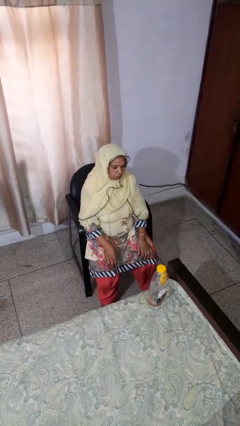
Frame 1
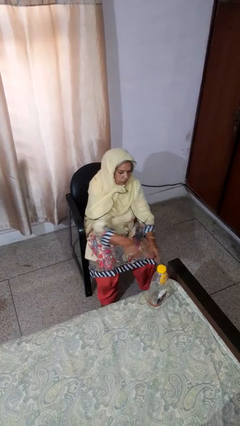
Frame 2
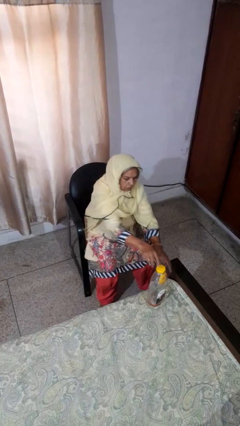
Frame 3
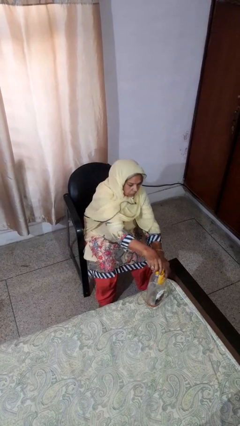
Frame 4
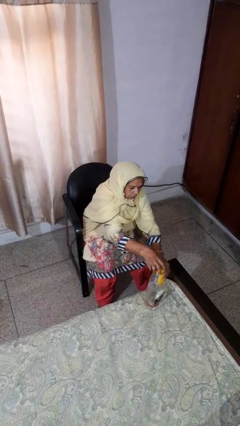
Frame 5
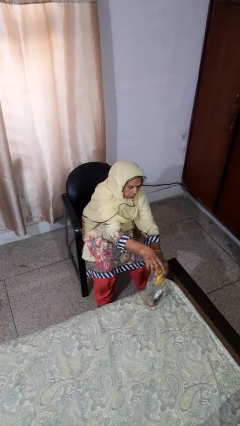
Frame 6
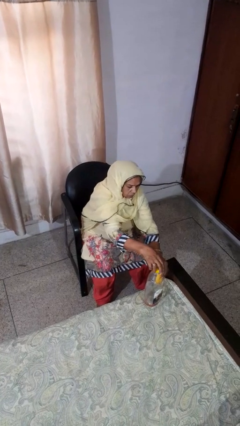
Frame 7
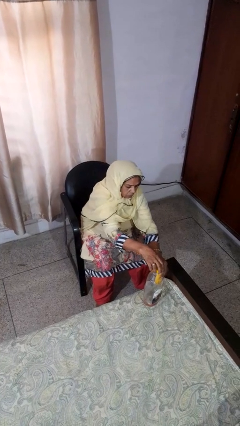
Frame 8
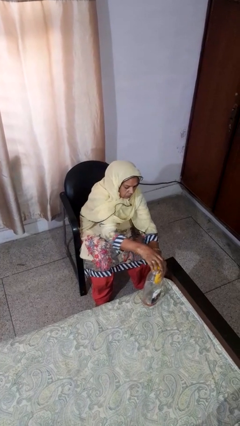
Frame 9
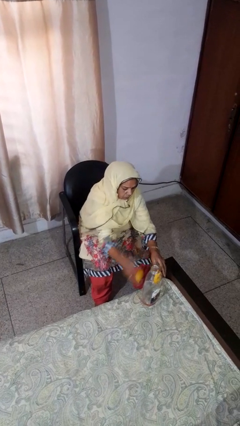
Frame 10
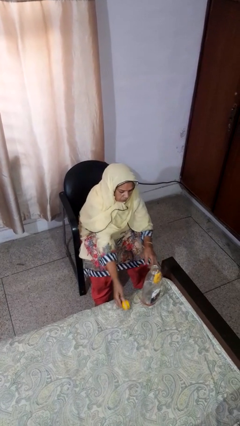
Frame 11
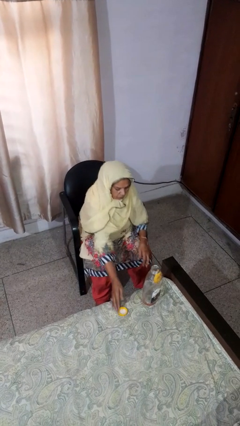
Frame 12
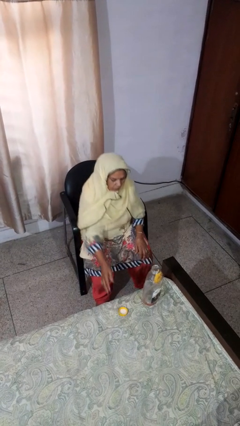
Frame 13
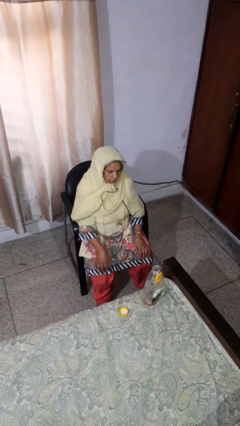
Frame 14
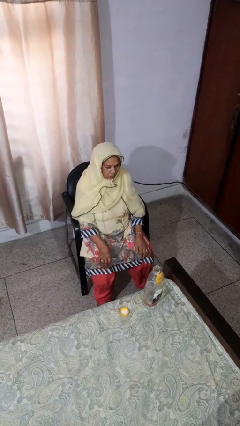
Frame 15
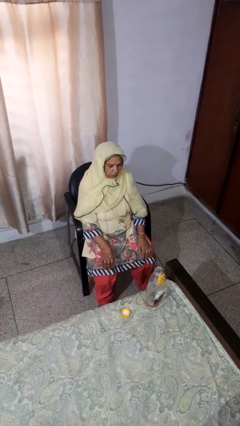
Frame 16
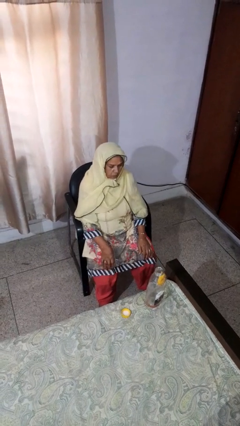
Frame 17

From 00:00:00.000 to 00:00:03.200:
person unscrews lid from bottle

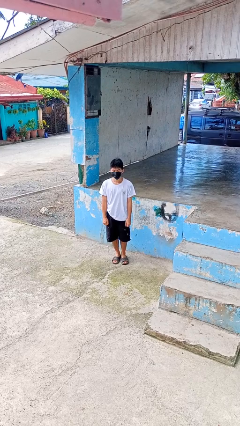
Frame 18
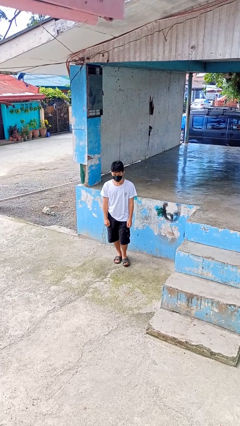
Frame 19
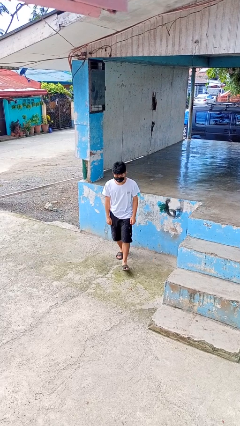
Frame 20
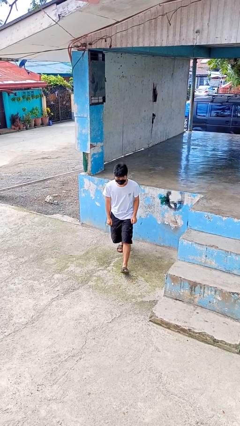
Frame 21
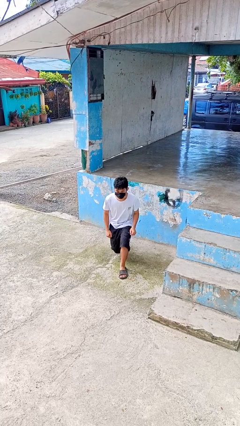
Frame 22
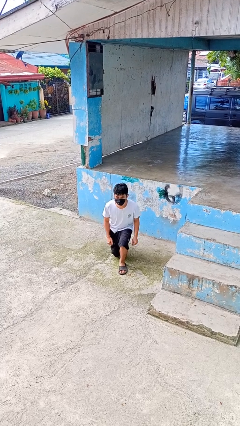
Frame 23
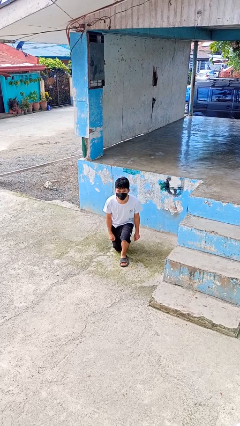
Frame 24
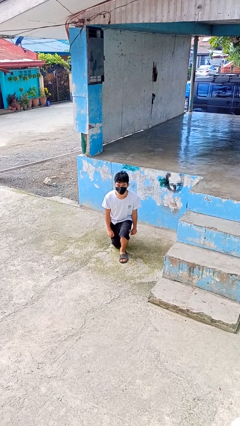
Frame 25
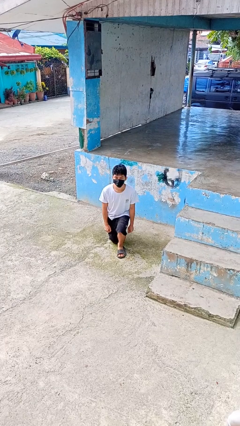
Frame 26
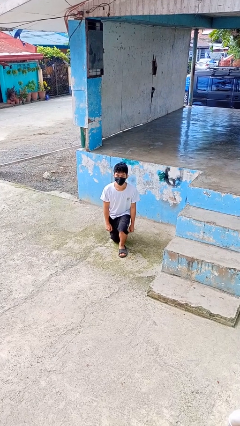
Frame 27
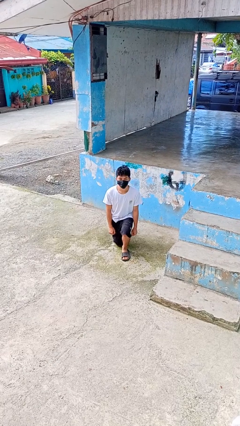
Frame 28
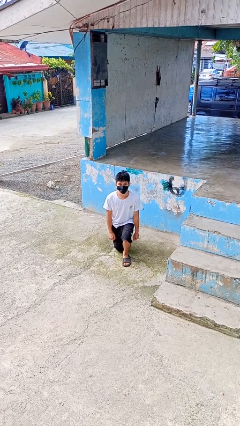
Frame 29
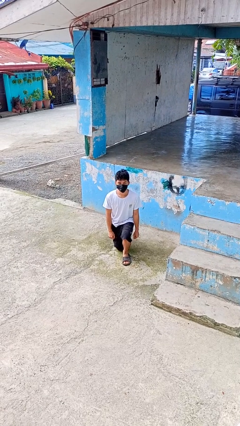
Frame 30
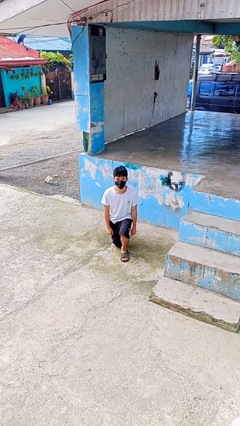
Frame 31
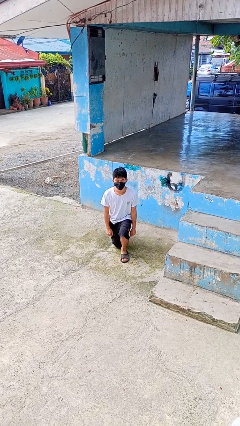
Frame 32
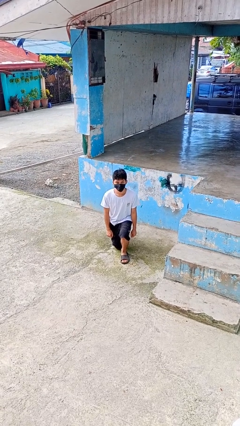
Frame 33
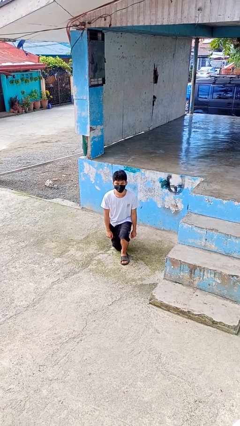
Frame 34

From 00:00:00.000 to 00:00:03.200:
person kneels

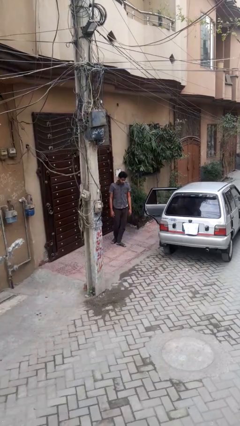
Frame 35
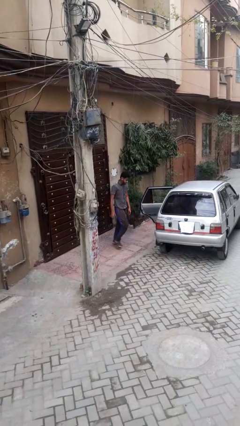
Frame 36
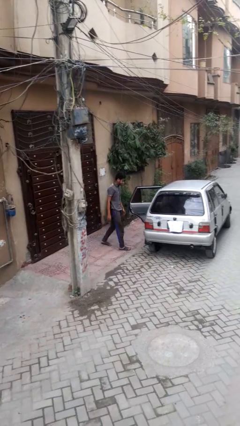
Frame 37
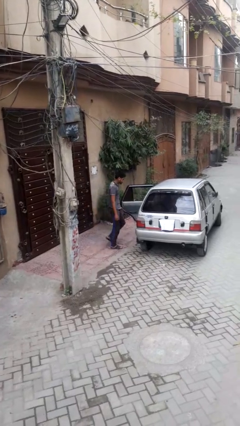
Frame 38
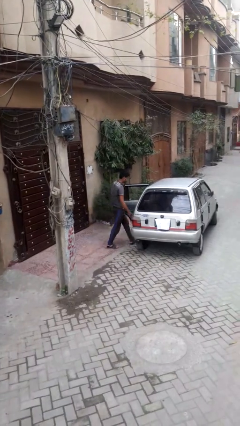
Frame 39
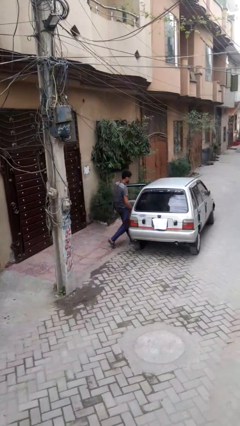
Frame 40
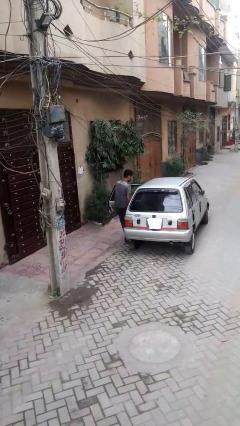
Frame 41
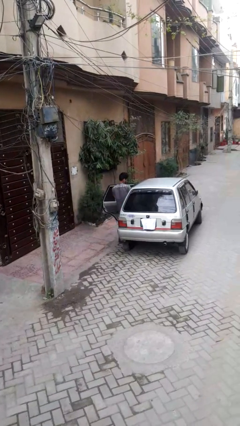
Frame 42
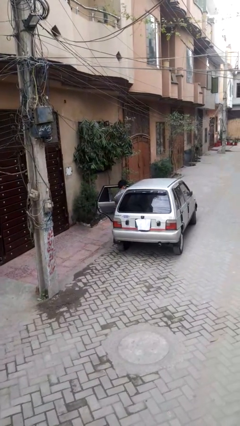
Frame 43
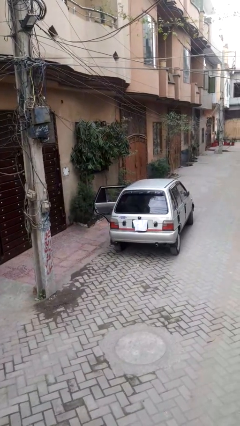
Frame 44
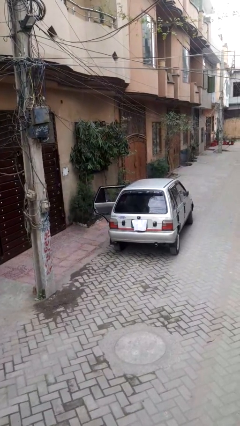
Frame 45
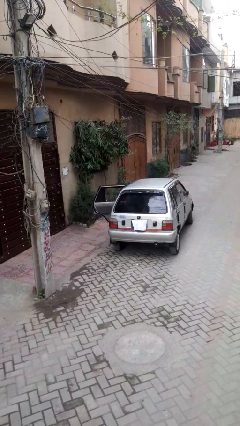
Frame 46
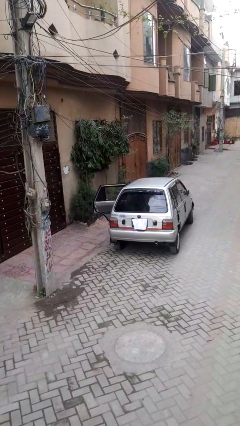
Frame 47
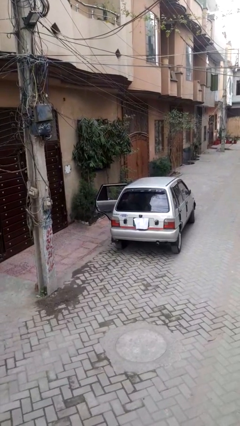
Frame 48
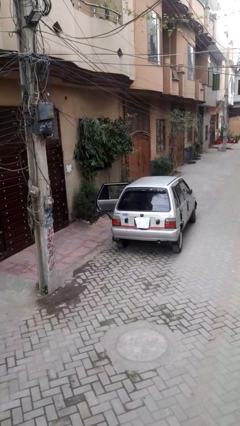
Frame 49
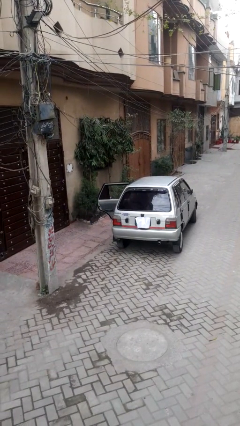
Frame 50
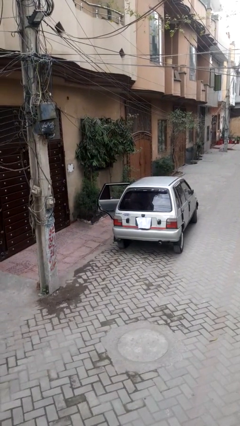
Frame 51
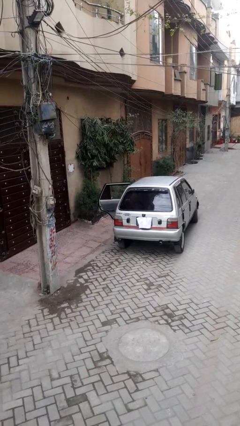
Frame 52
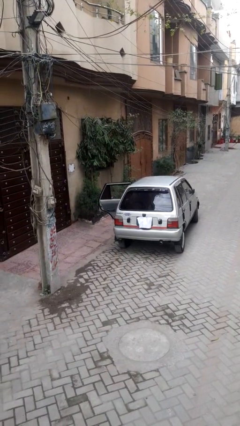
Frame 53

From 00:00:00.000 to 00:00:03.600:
person enters car

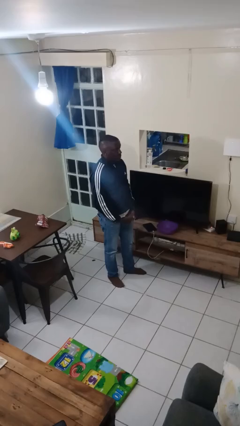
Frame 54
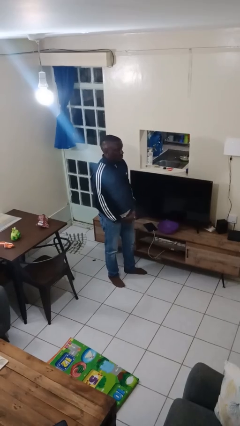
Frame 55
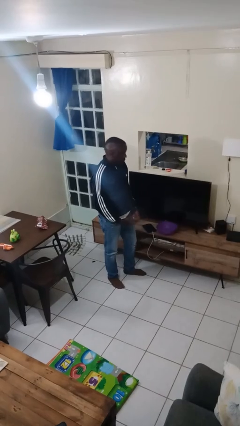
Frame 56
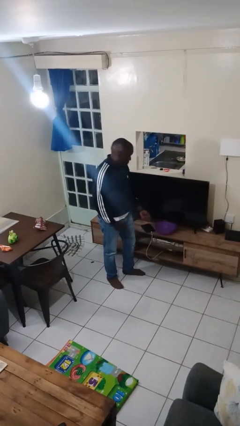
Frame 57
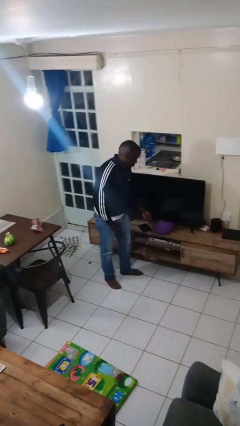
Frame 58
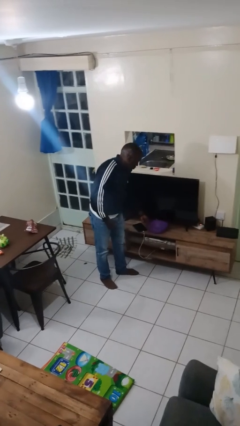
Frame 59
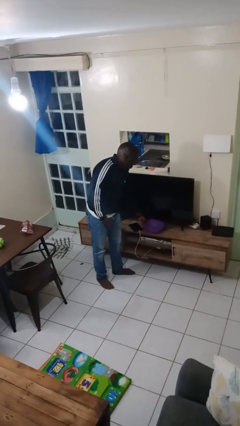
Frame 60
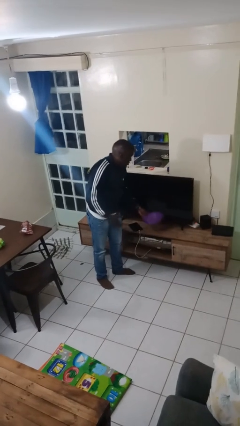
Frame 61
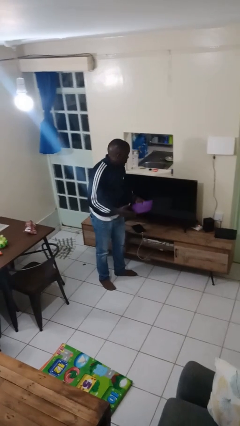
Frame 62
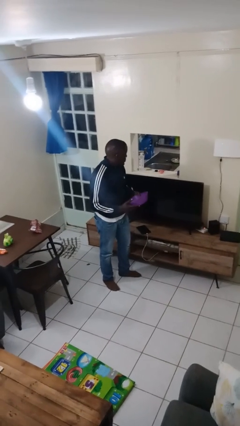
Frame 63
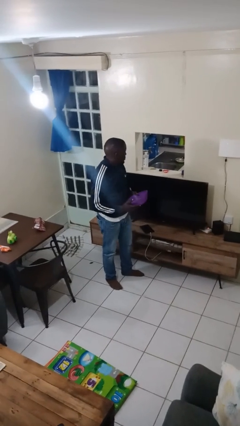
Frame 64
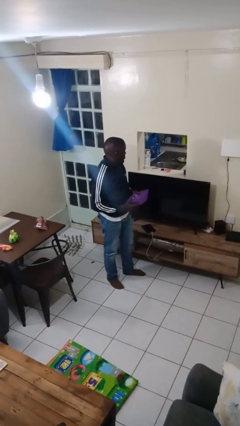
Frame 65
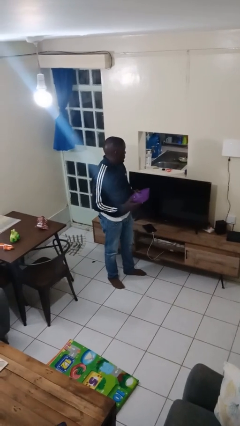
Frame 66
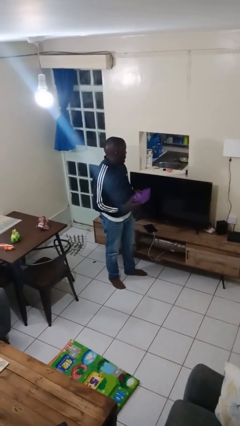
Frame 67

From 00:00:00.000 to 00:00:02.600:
person picks up object from countertop

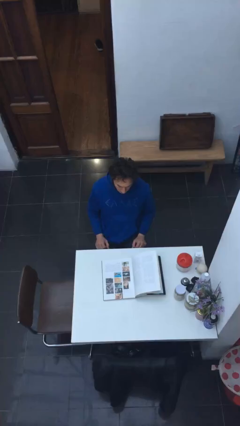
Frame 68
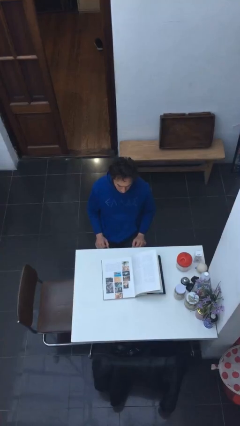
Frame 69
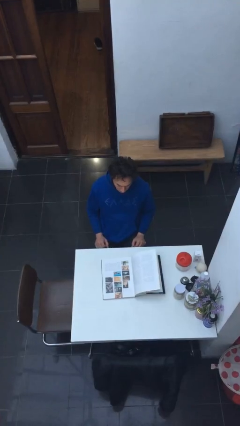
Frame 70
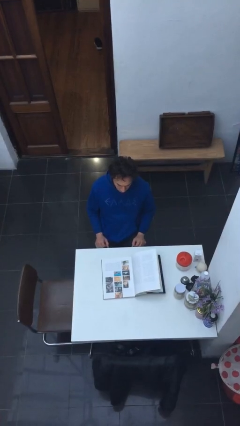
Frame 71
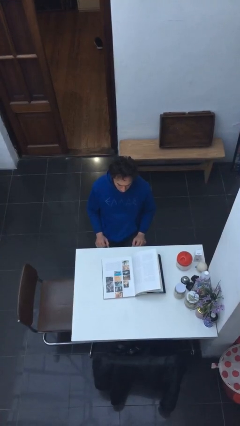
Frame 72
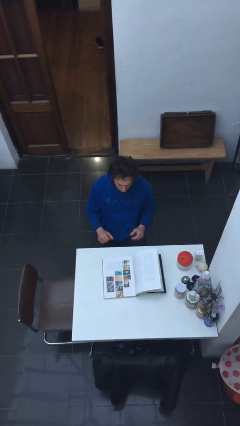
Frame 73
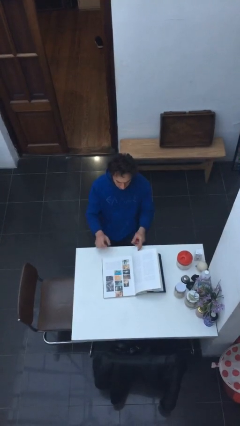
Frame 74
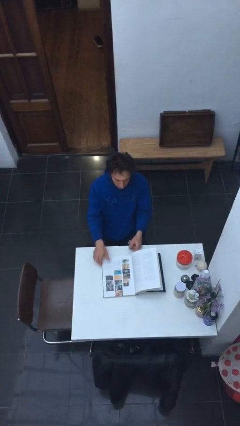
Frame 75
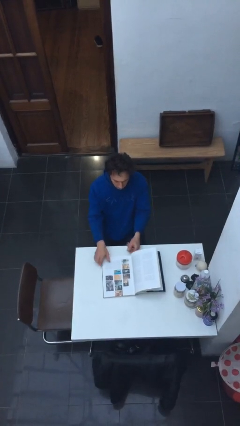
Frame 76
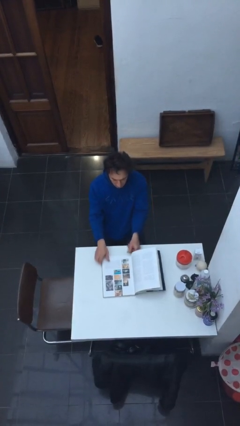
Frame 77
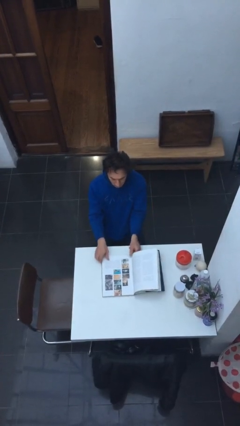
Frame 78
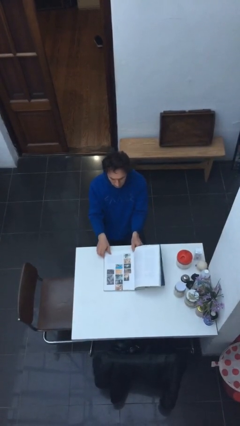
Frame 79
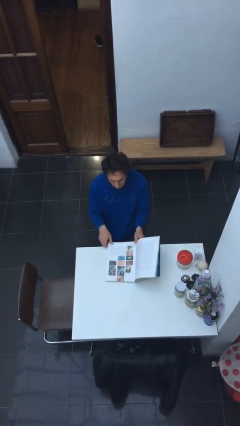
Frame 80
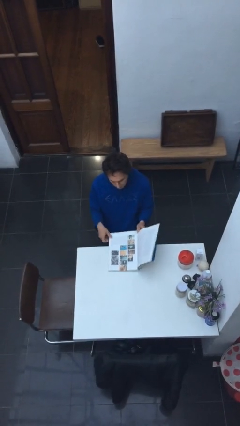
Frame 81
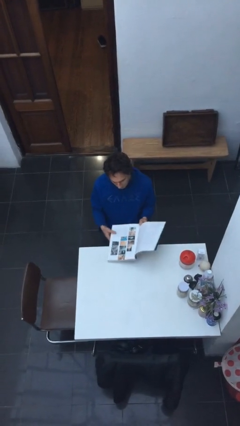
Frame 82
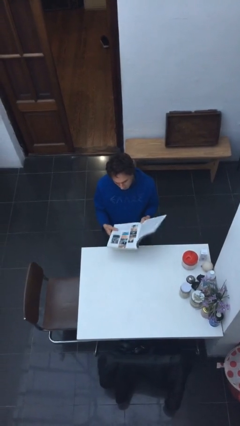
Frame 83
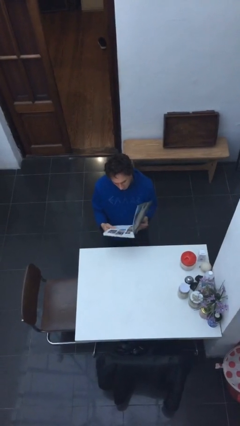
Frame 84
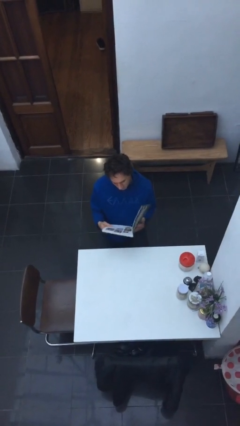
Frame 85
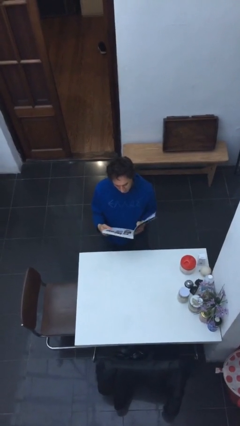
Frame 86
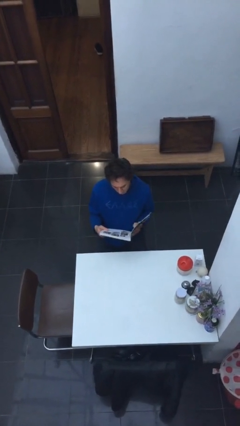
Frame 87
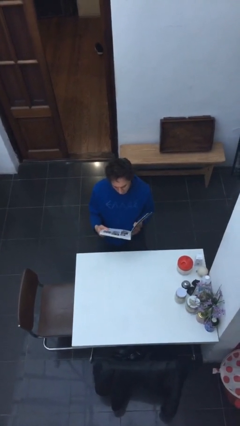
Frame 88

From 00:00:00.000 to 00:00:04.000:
person picks up object from table

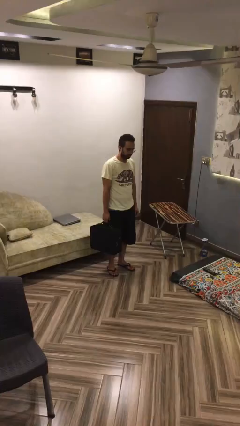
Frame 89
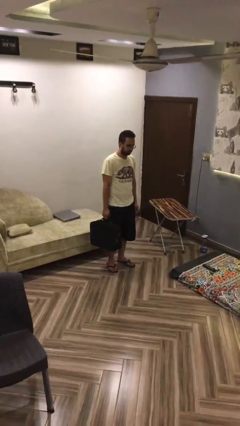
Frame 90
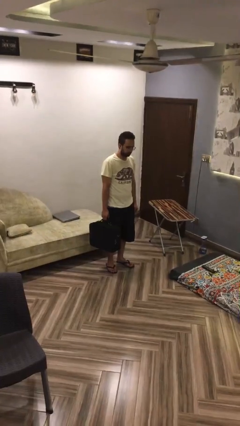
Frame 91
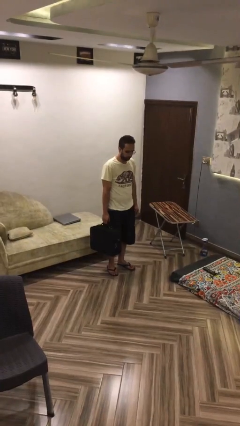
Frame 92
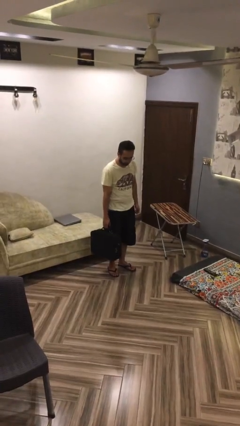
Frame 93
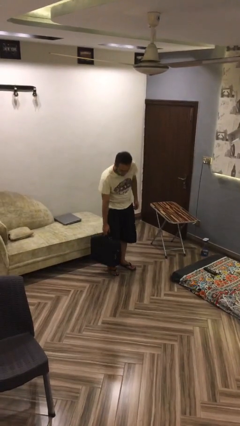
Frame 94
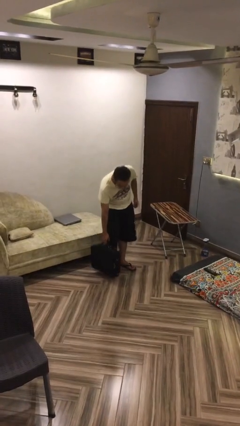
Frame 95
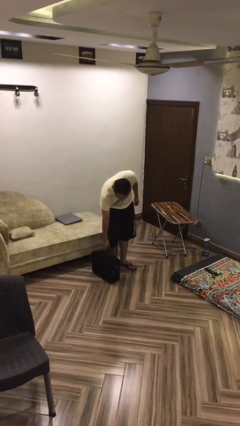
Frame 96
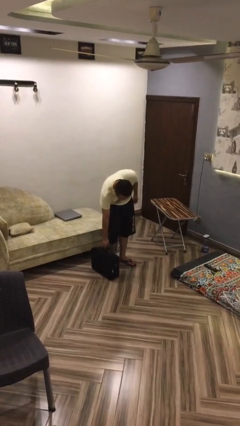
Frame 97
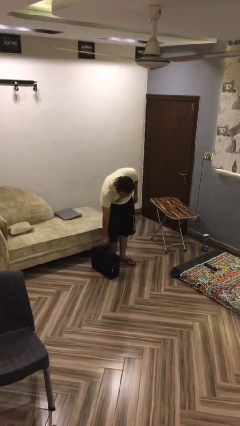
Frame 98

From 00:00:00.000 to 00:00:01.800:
person puts down object on floor
